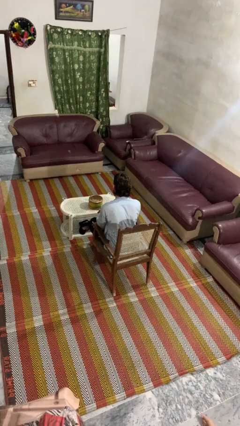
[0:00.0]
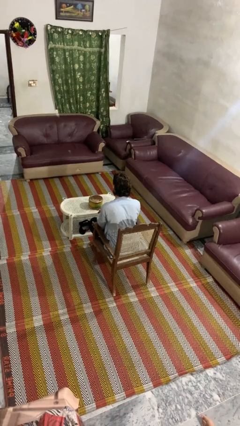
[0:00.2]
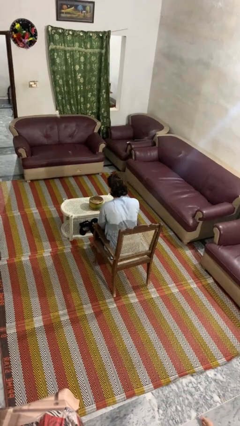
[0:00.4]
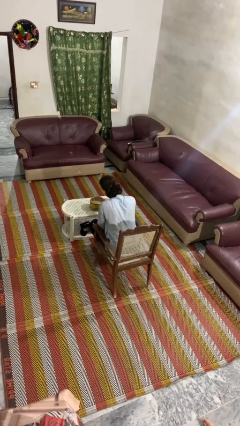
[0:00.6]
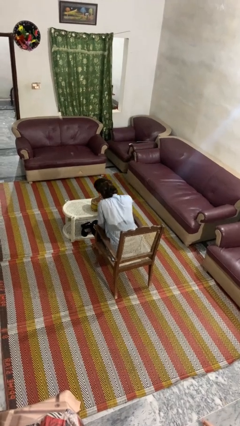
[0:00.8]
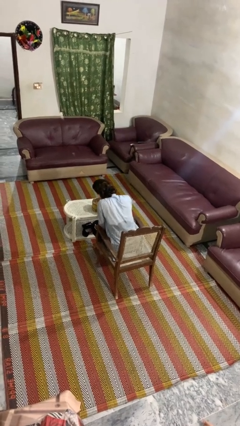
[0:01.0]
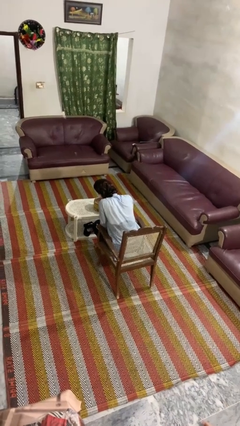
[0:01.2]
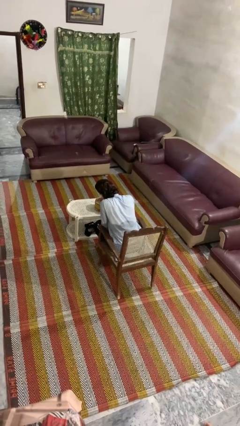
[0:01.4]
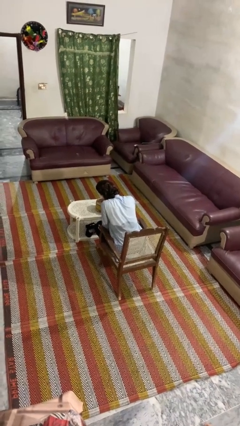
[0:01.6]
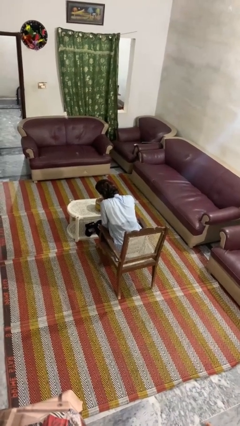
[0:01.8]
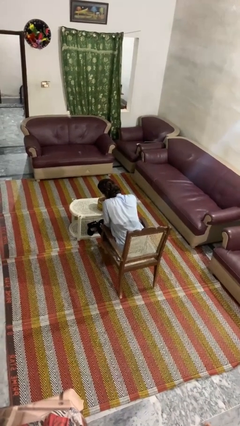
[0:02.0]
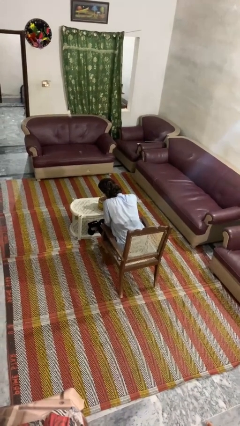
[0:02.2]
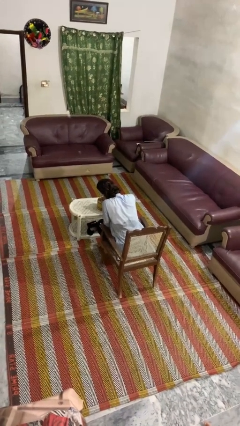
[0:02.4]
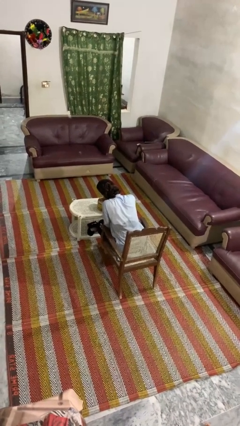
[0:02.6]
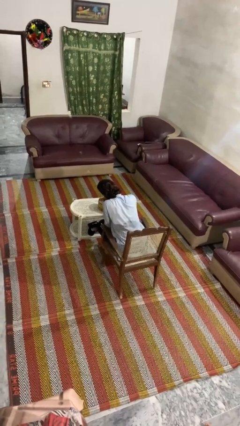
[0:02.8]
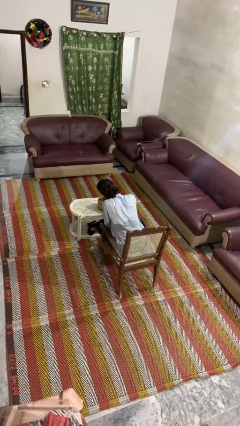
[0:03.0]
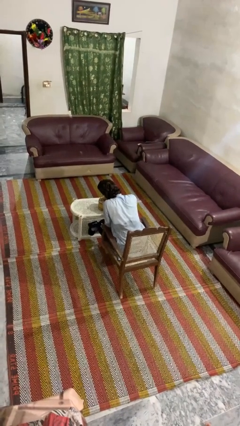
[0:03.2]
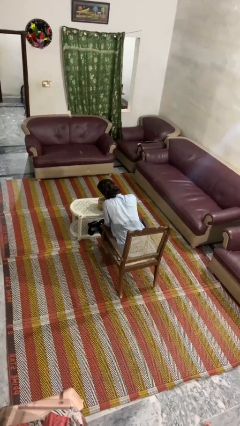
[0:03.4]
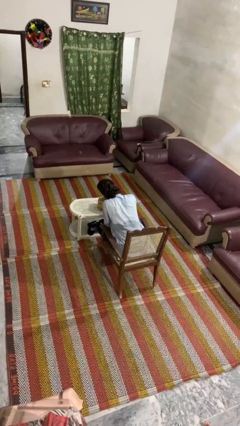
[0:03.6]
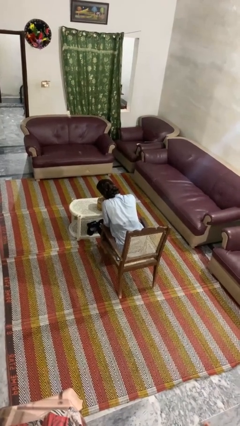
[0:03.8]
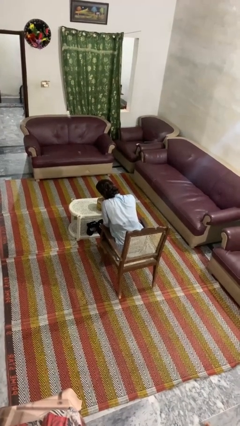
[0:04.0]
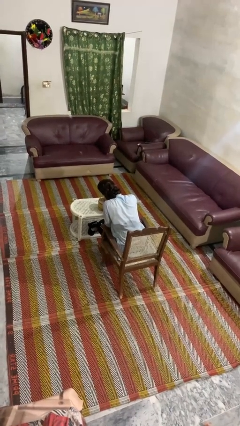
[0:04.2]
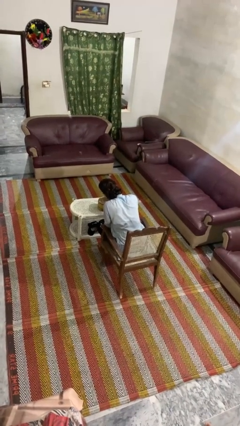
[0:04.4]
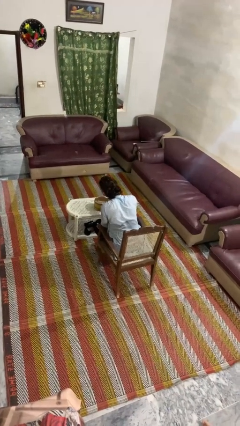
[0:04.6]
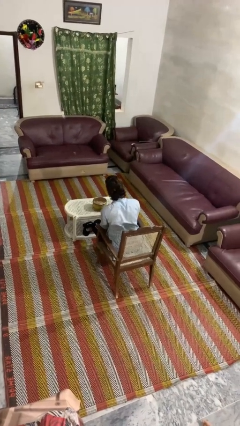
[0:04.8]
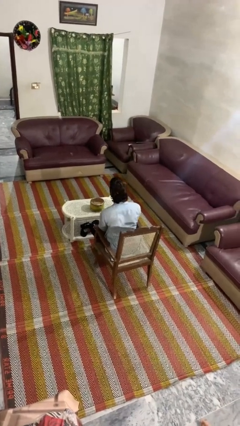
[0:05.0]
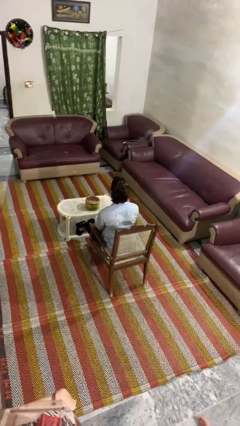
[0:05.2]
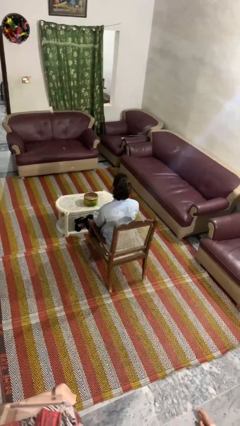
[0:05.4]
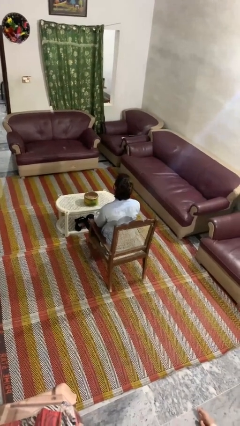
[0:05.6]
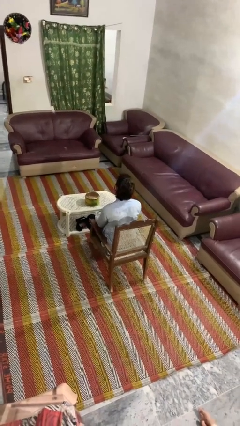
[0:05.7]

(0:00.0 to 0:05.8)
person taps object with finger

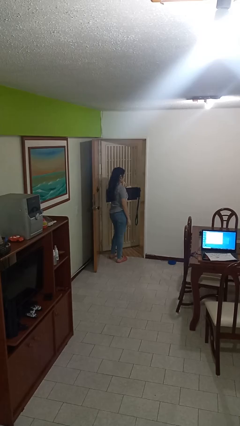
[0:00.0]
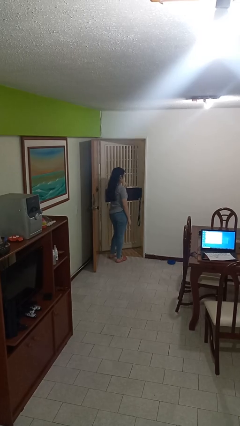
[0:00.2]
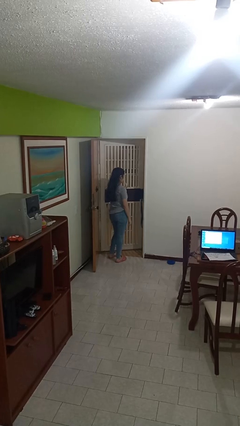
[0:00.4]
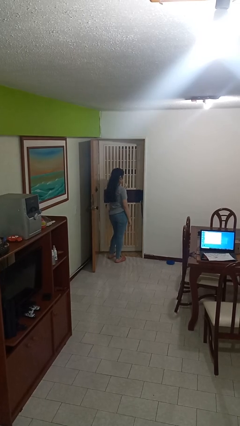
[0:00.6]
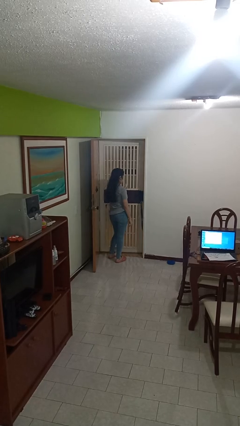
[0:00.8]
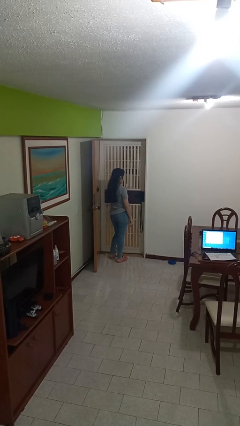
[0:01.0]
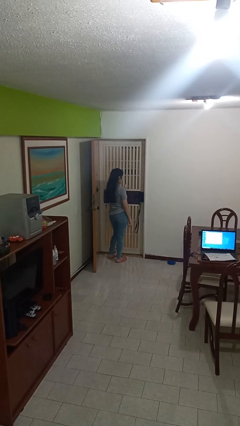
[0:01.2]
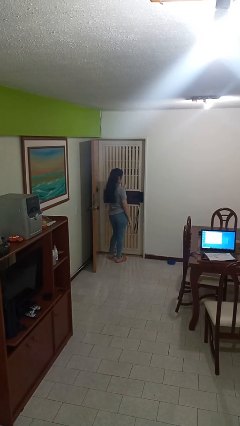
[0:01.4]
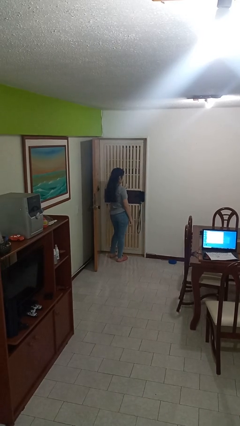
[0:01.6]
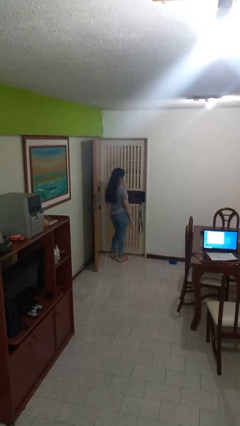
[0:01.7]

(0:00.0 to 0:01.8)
person closes facility door

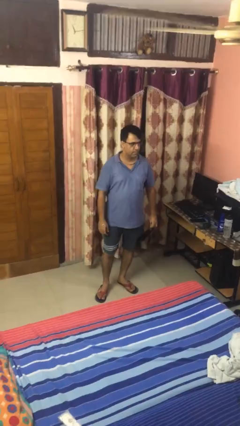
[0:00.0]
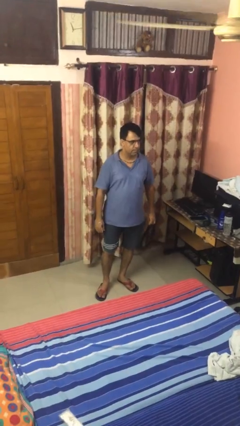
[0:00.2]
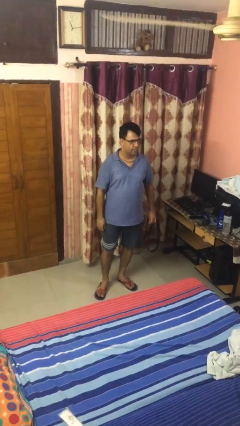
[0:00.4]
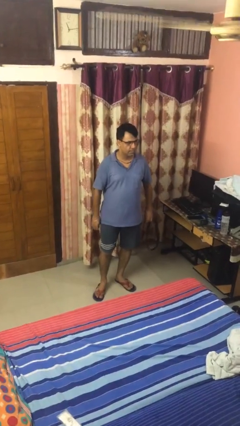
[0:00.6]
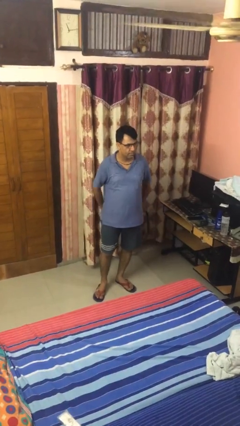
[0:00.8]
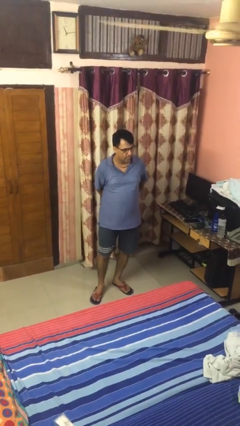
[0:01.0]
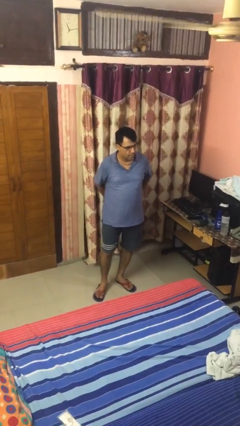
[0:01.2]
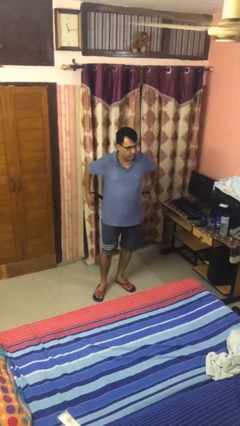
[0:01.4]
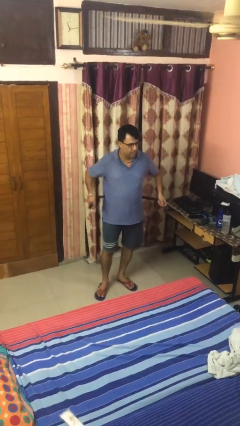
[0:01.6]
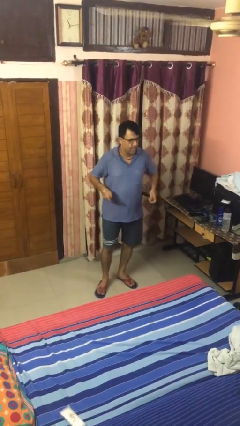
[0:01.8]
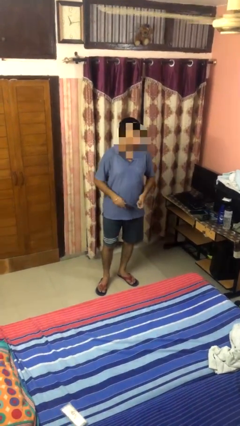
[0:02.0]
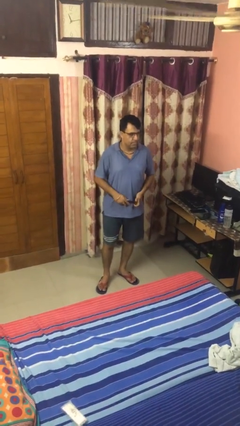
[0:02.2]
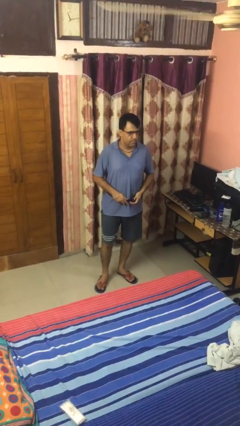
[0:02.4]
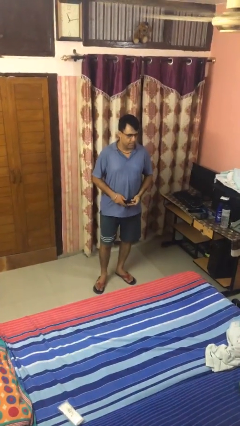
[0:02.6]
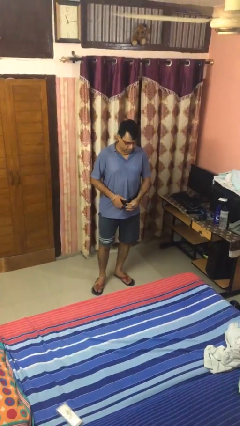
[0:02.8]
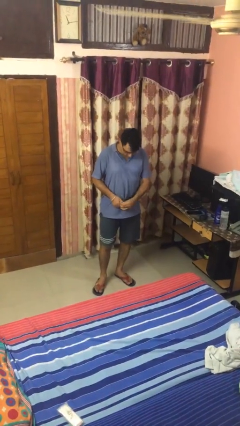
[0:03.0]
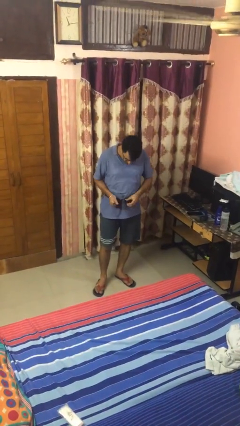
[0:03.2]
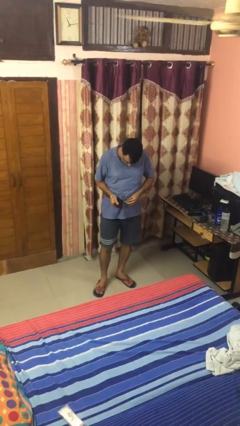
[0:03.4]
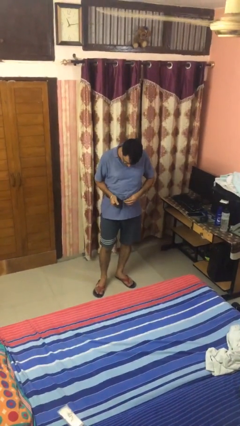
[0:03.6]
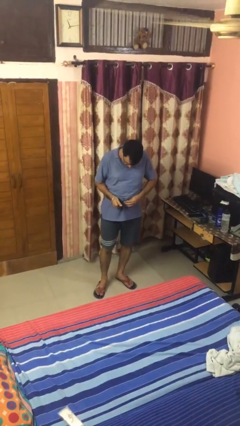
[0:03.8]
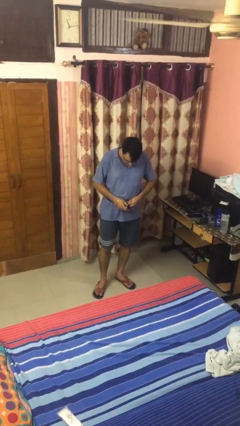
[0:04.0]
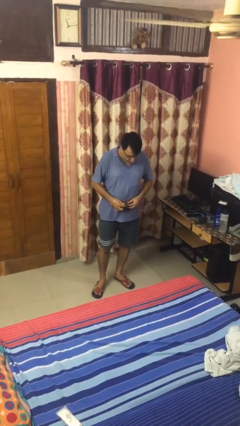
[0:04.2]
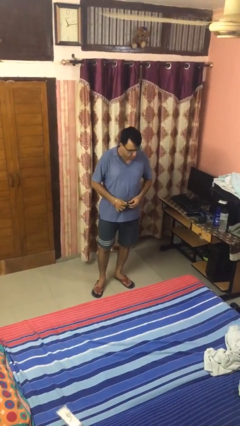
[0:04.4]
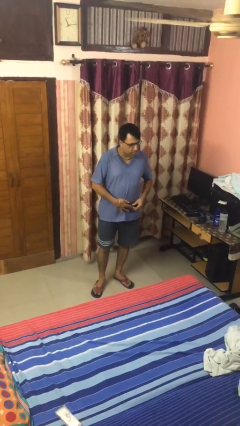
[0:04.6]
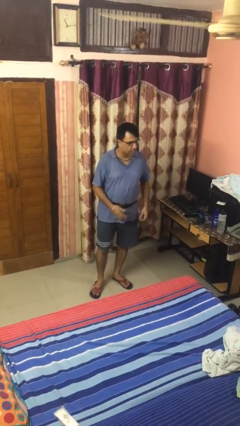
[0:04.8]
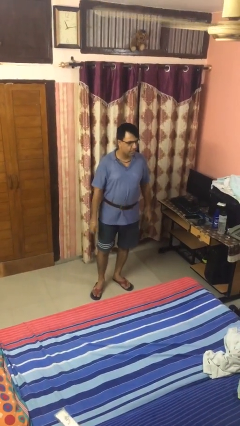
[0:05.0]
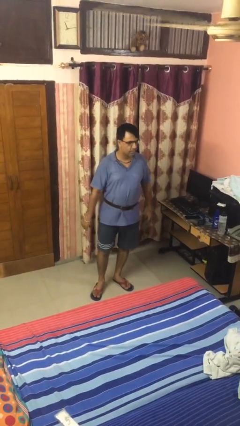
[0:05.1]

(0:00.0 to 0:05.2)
person puts on belt

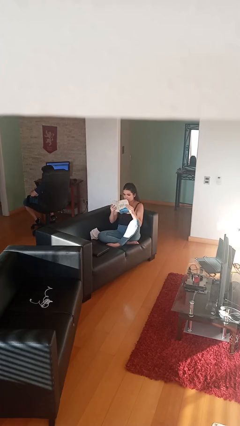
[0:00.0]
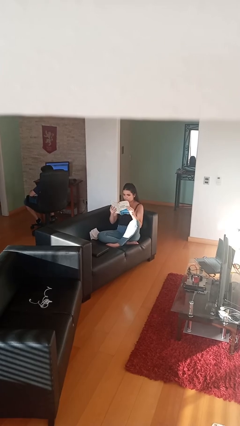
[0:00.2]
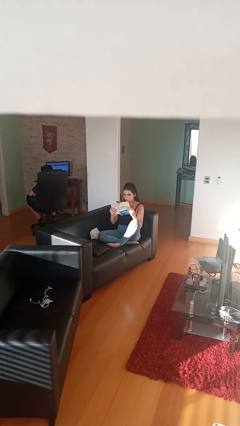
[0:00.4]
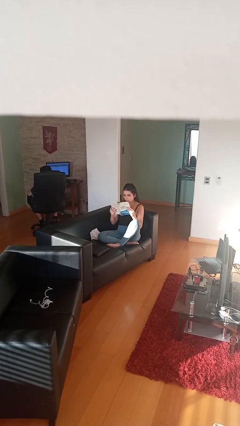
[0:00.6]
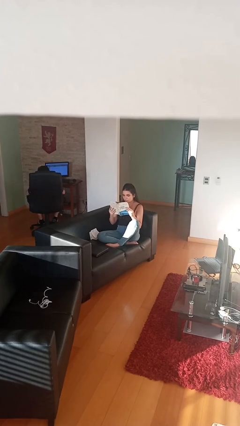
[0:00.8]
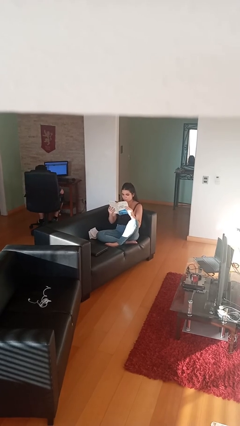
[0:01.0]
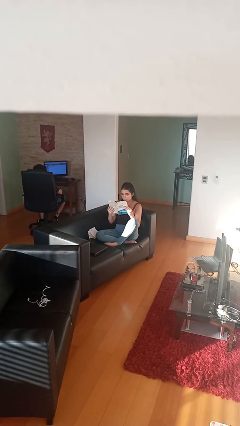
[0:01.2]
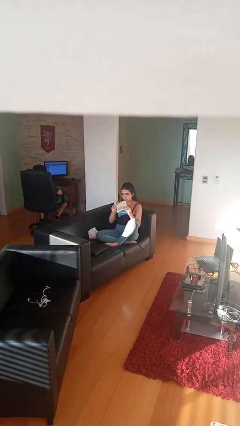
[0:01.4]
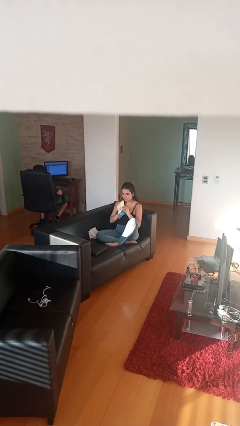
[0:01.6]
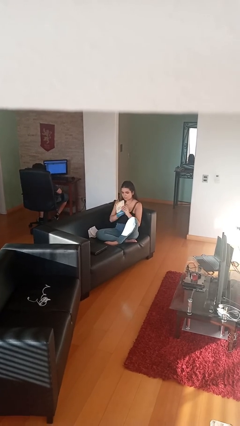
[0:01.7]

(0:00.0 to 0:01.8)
person reads document

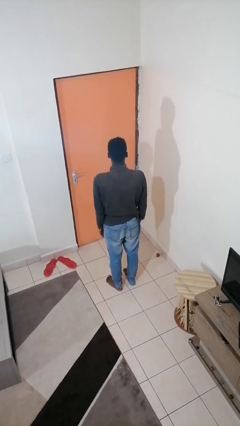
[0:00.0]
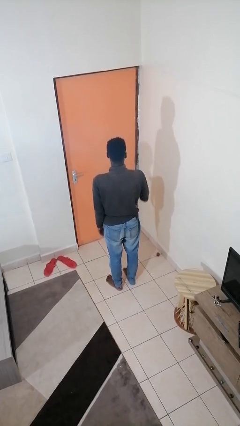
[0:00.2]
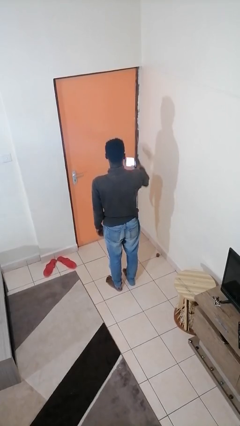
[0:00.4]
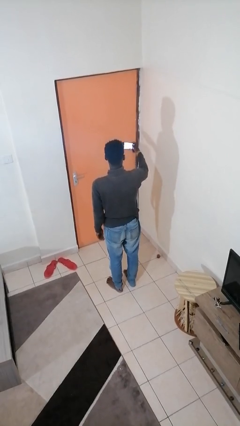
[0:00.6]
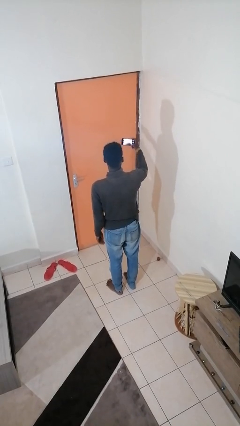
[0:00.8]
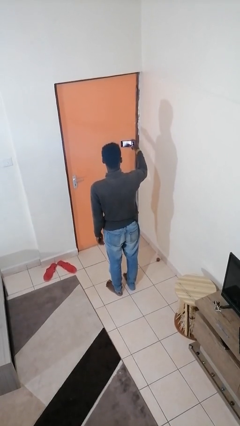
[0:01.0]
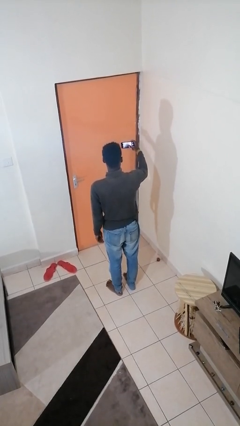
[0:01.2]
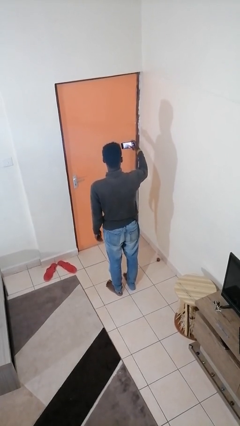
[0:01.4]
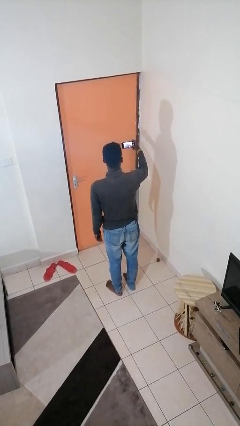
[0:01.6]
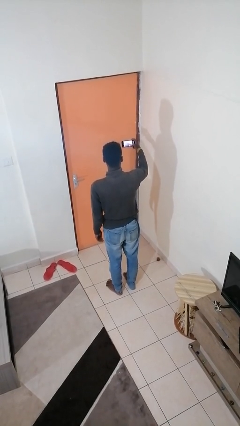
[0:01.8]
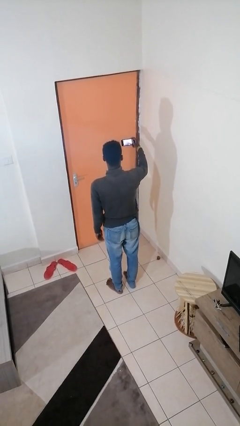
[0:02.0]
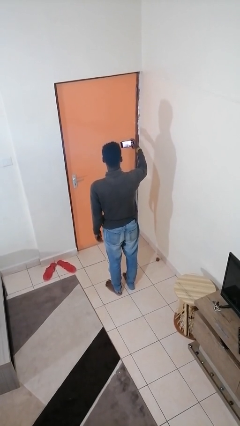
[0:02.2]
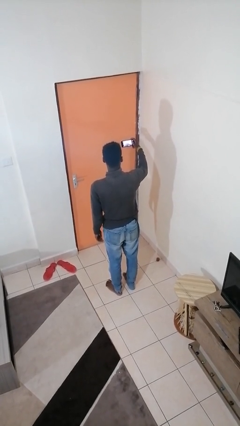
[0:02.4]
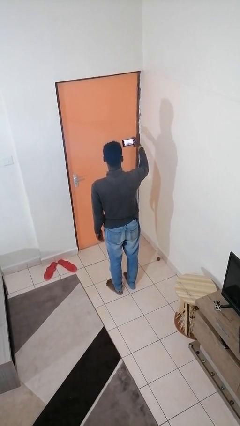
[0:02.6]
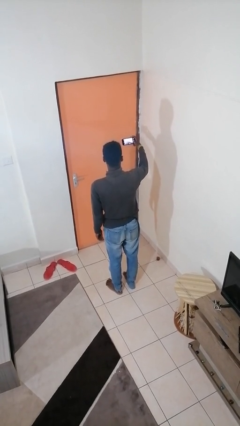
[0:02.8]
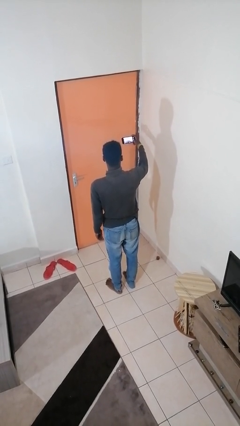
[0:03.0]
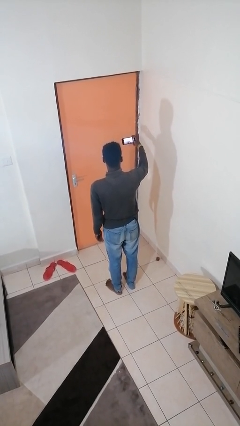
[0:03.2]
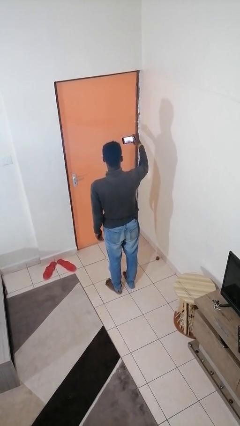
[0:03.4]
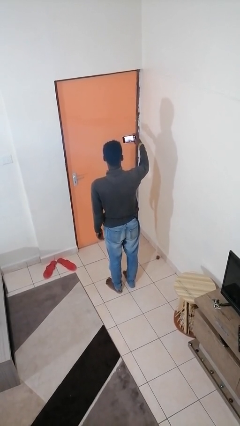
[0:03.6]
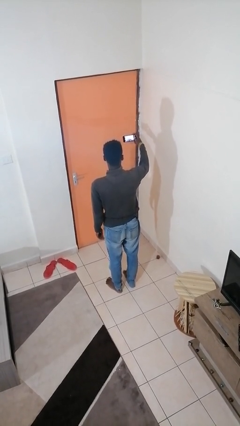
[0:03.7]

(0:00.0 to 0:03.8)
person takes selfie
